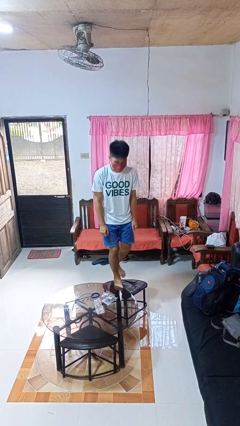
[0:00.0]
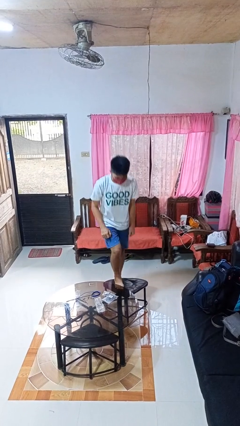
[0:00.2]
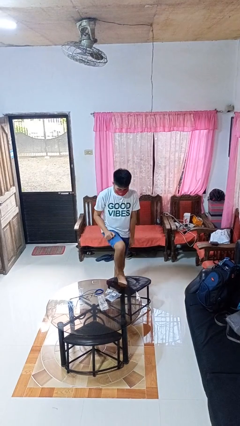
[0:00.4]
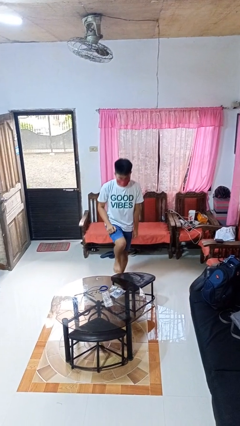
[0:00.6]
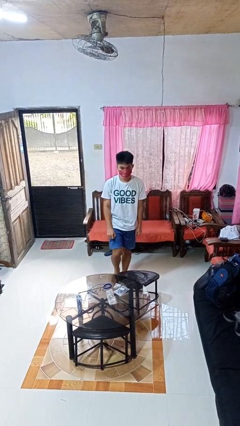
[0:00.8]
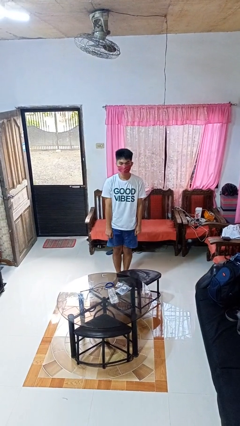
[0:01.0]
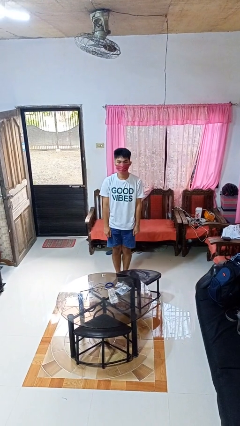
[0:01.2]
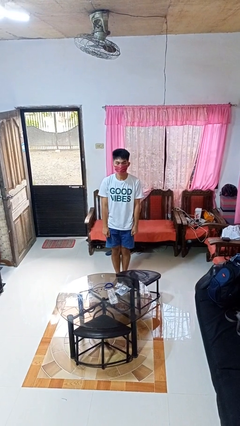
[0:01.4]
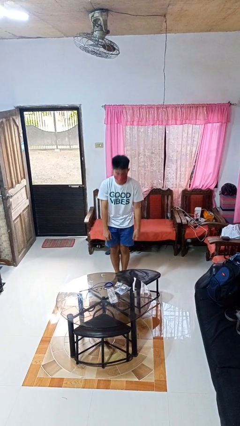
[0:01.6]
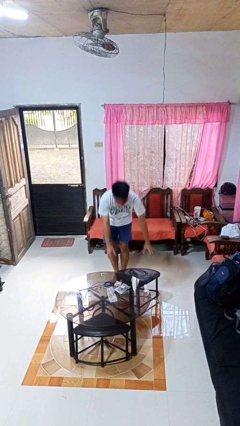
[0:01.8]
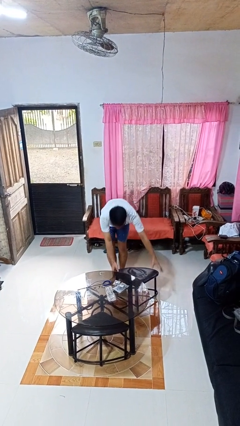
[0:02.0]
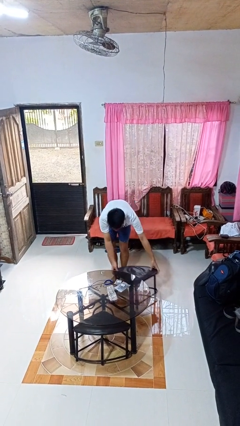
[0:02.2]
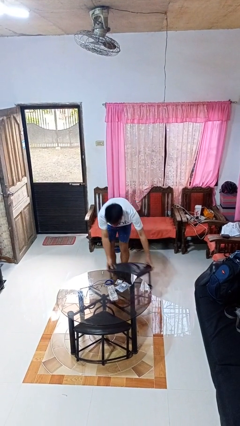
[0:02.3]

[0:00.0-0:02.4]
person climbs off chair

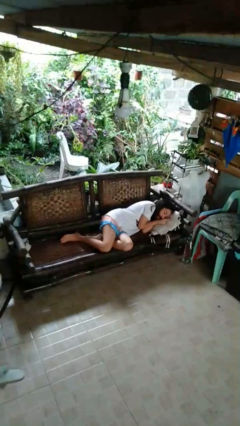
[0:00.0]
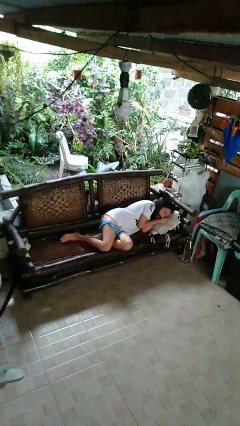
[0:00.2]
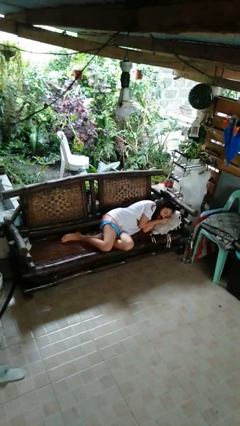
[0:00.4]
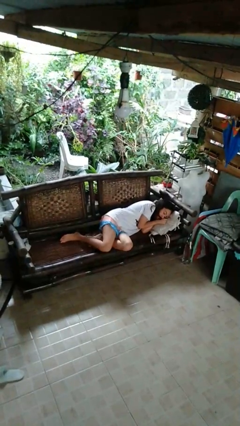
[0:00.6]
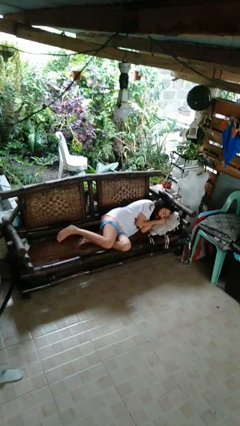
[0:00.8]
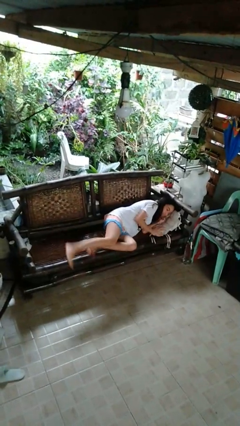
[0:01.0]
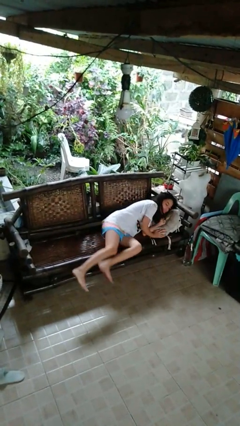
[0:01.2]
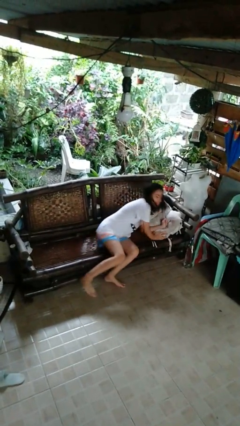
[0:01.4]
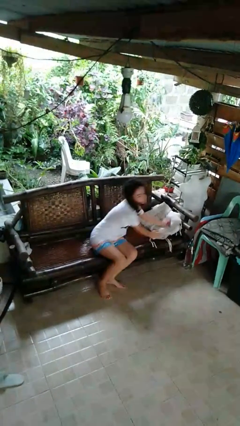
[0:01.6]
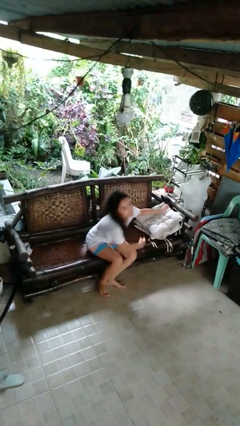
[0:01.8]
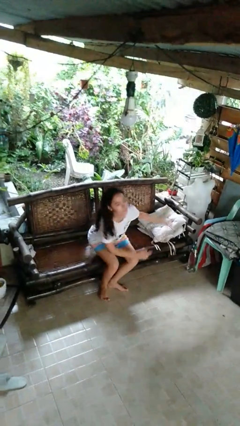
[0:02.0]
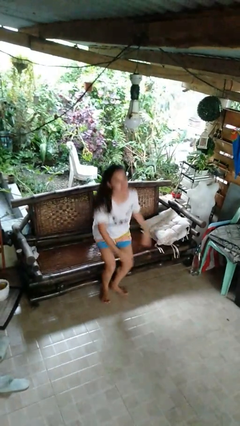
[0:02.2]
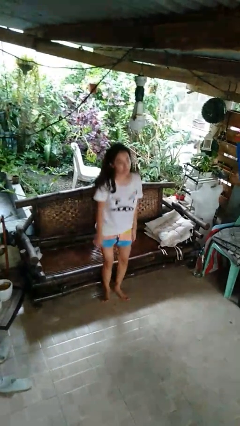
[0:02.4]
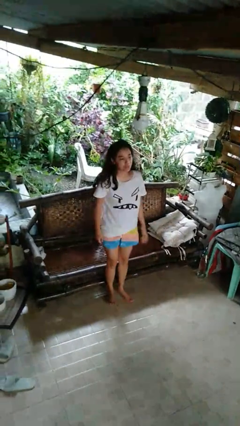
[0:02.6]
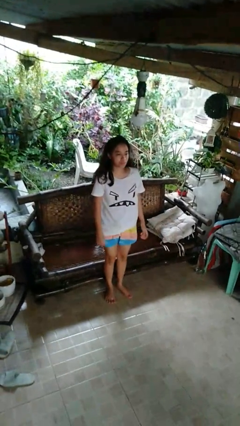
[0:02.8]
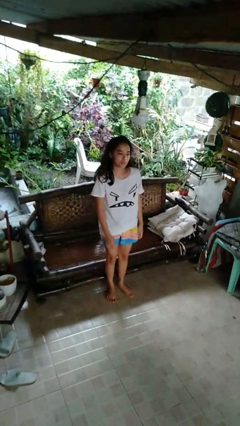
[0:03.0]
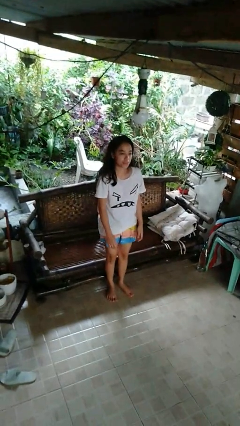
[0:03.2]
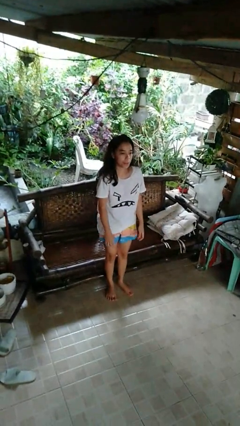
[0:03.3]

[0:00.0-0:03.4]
person stands up

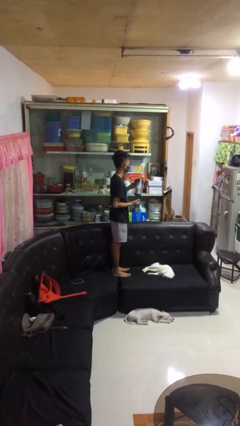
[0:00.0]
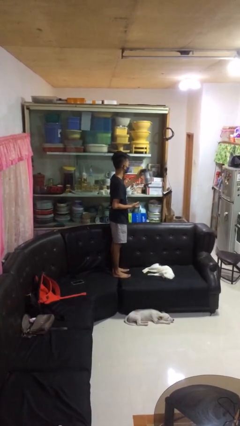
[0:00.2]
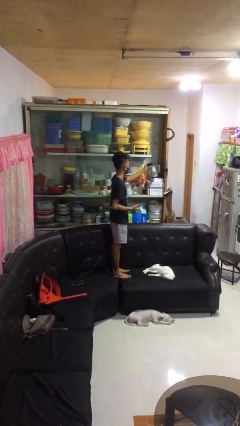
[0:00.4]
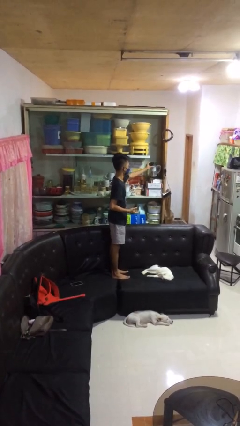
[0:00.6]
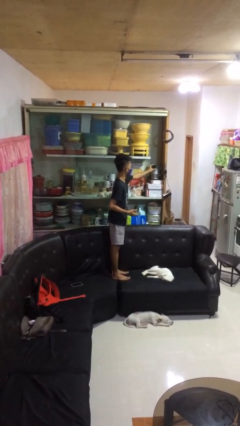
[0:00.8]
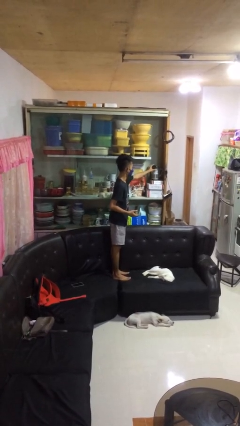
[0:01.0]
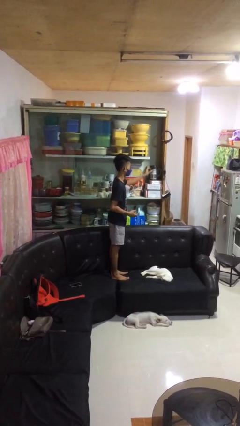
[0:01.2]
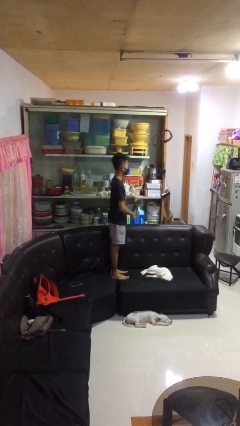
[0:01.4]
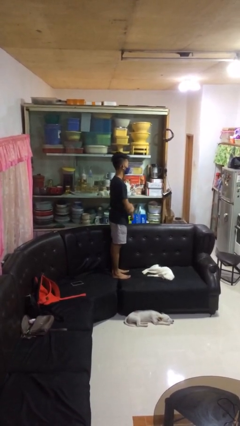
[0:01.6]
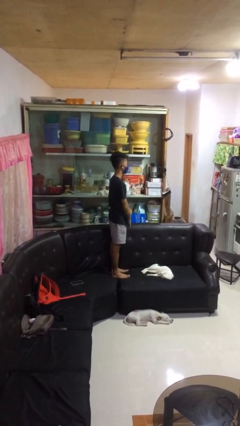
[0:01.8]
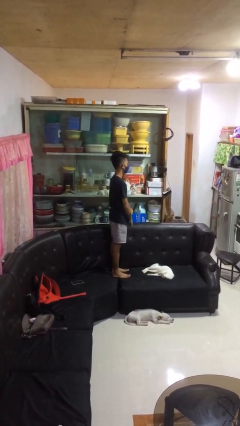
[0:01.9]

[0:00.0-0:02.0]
person puts down object into cabinet

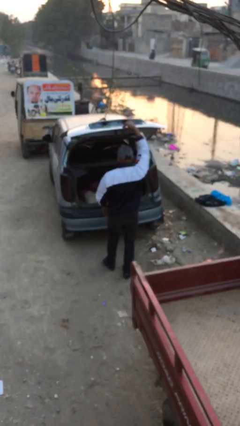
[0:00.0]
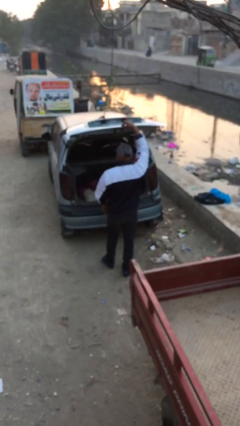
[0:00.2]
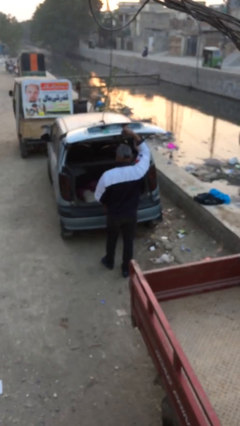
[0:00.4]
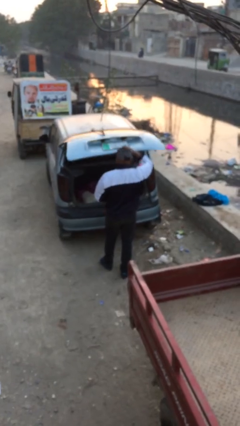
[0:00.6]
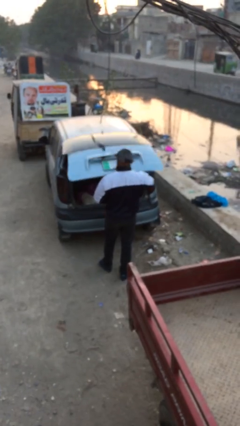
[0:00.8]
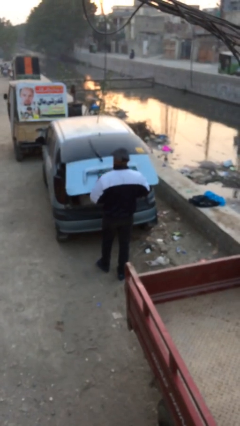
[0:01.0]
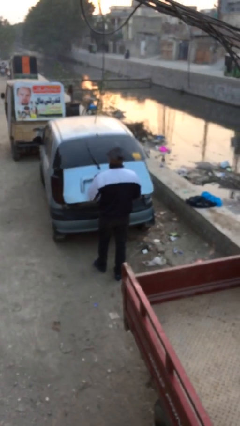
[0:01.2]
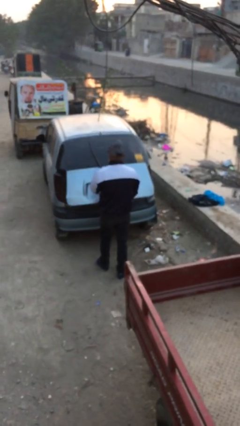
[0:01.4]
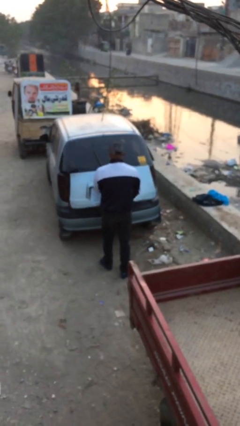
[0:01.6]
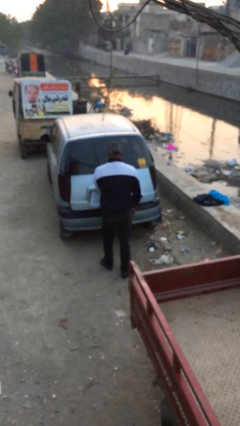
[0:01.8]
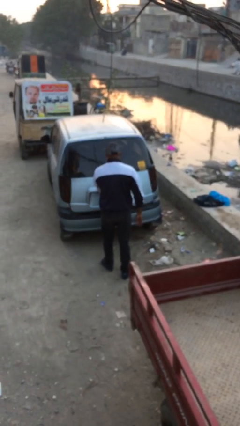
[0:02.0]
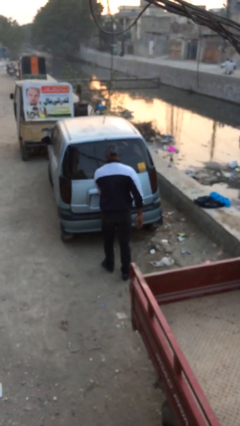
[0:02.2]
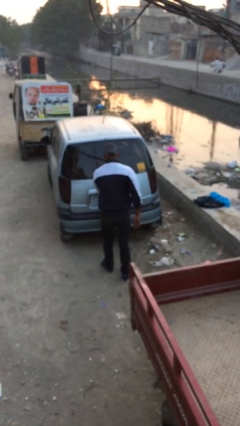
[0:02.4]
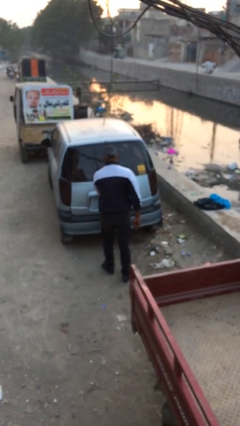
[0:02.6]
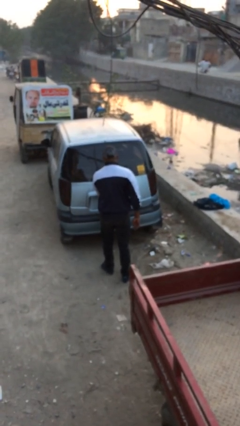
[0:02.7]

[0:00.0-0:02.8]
person closes car trunk

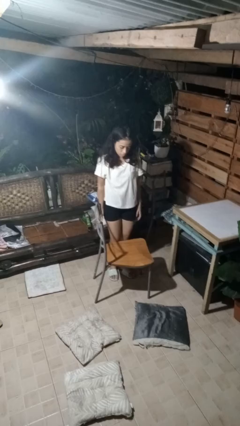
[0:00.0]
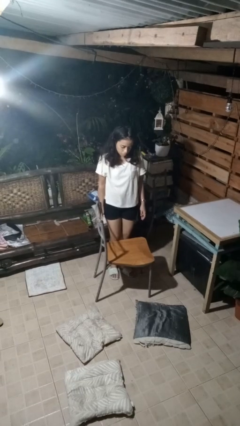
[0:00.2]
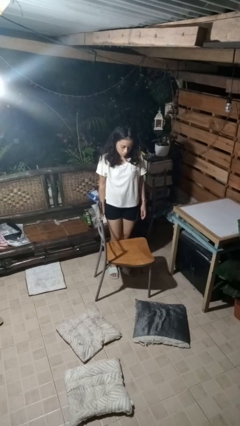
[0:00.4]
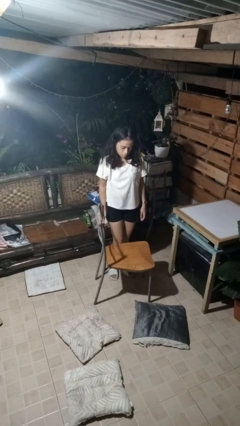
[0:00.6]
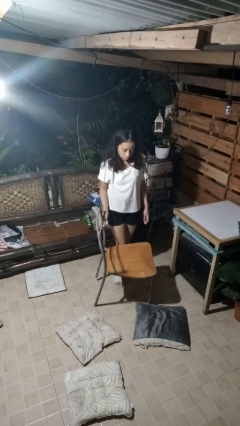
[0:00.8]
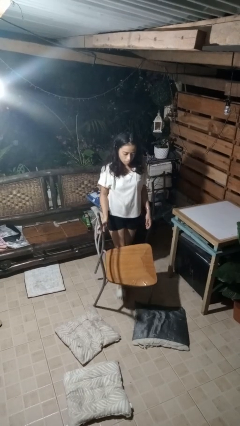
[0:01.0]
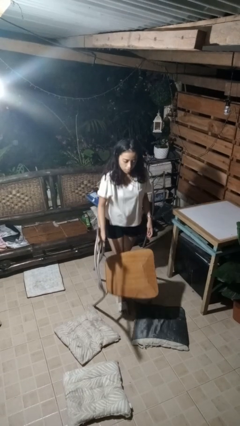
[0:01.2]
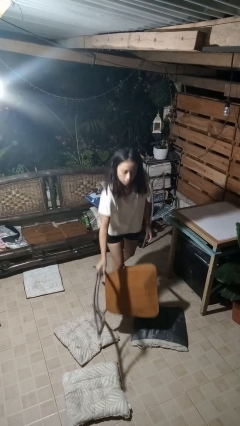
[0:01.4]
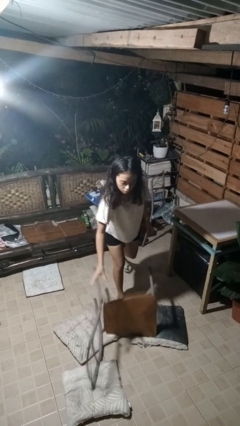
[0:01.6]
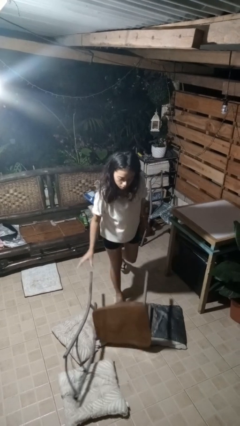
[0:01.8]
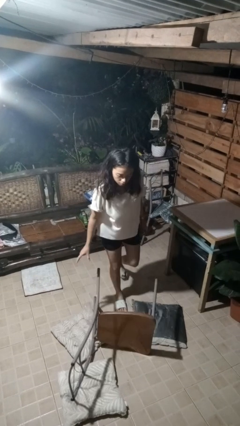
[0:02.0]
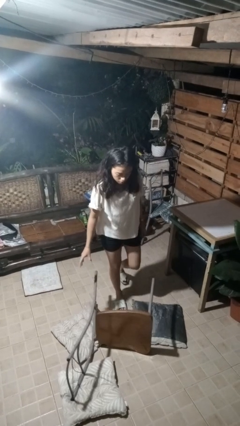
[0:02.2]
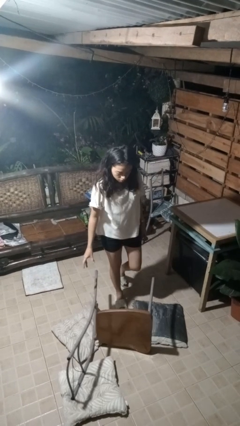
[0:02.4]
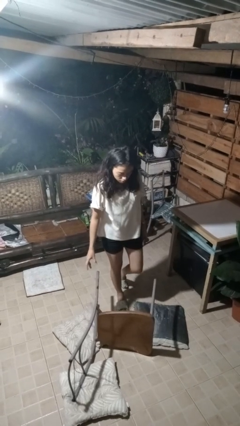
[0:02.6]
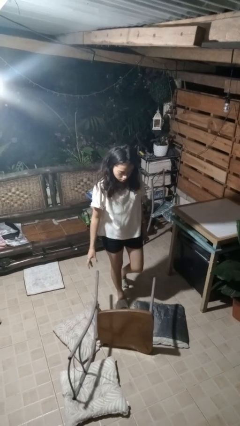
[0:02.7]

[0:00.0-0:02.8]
person knocks over furniture

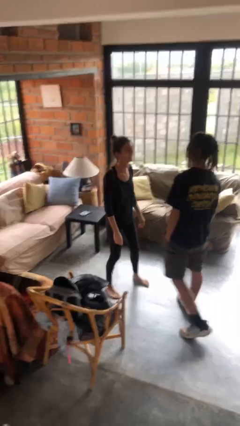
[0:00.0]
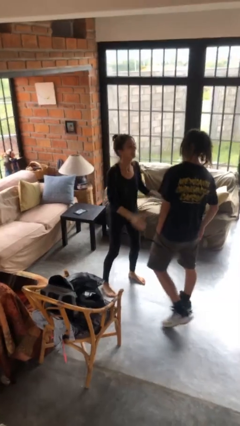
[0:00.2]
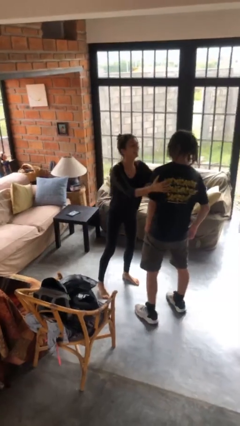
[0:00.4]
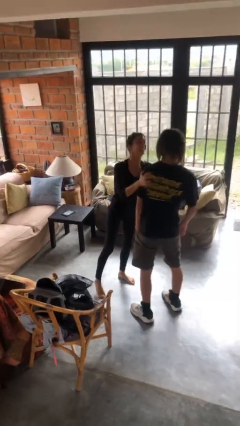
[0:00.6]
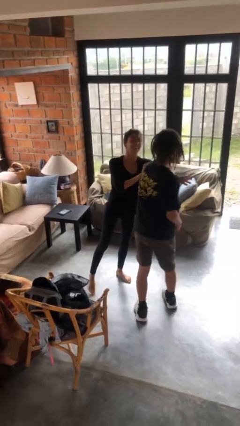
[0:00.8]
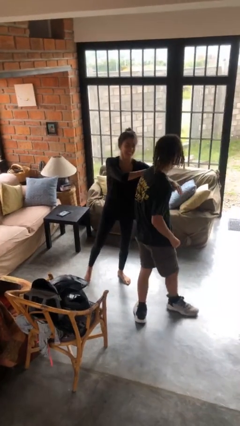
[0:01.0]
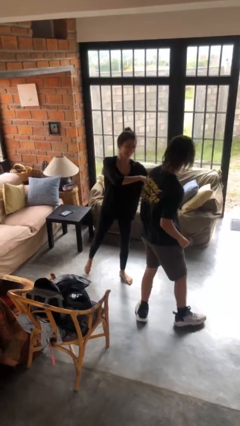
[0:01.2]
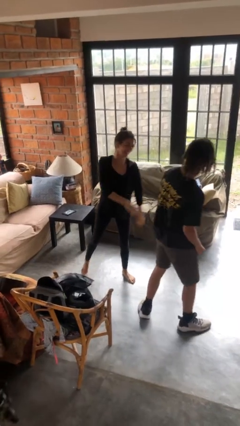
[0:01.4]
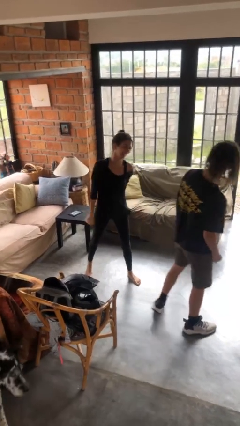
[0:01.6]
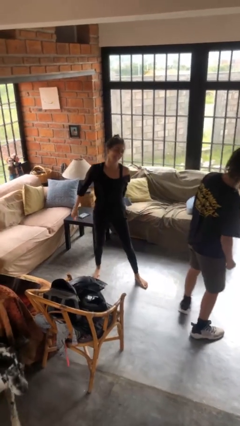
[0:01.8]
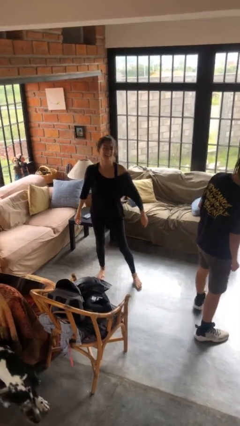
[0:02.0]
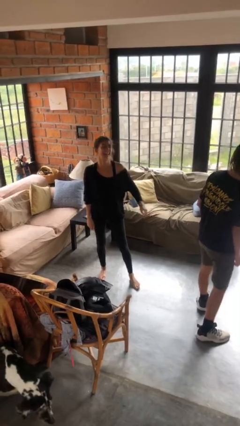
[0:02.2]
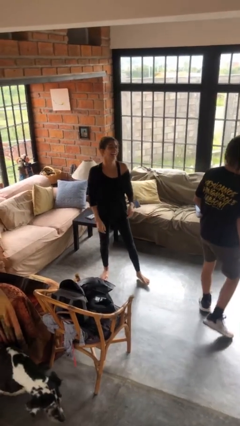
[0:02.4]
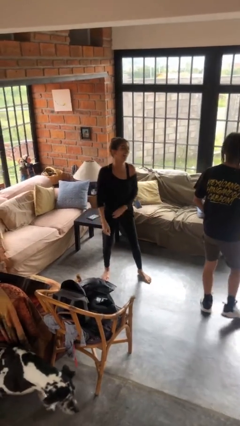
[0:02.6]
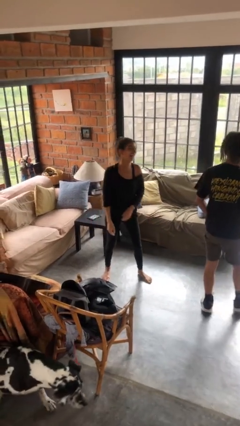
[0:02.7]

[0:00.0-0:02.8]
person shoves person

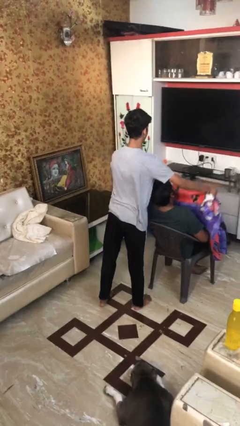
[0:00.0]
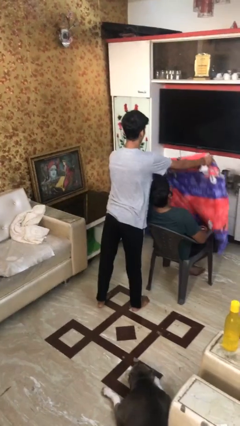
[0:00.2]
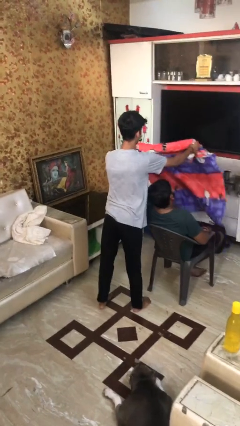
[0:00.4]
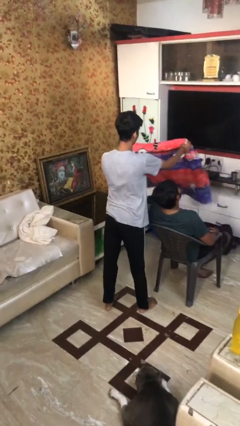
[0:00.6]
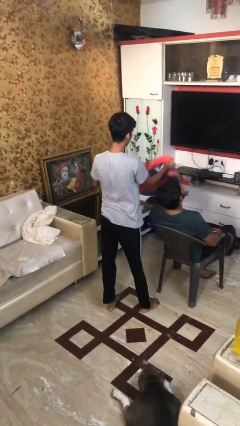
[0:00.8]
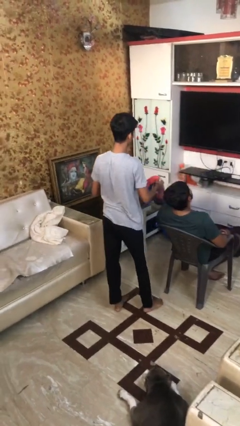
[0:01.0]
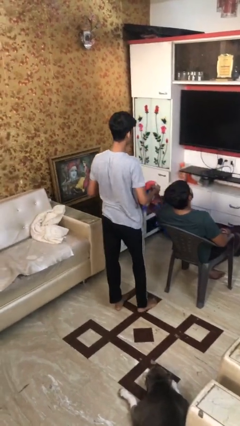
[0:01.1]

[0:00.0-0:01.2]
person uncovers friend with blanket
